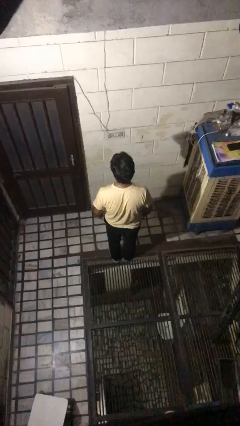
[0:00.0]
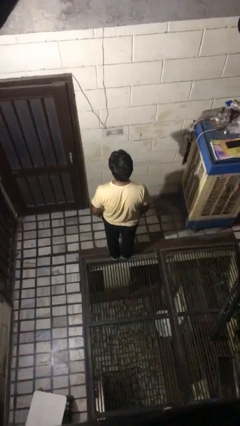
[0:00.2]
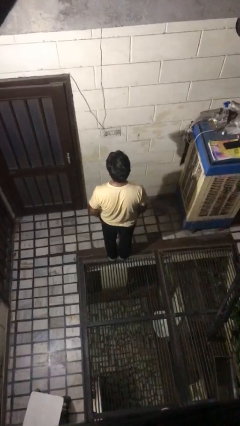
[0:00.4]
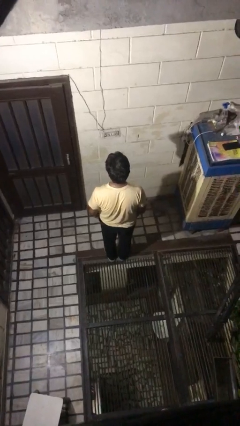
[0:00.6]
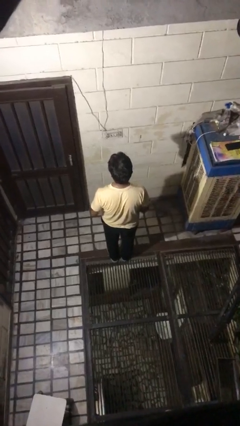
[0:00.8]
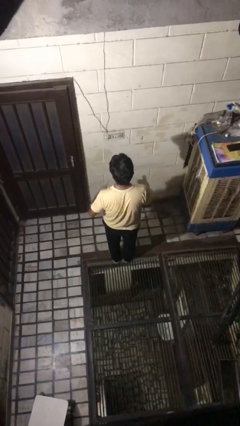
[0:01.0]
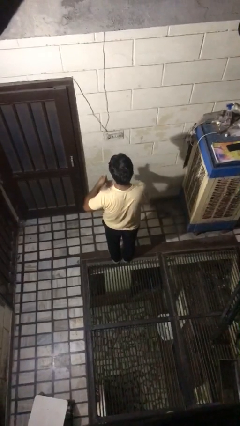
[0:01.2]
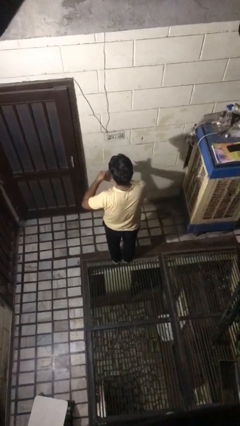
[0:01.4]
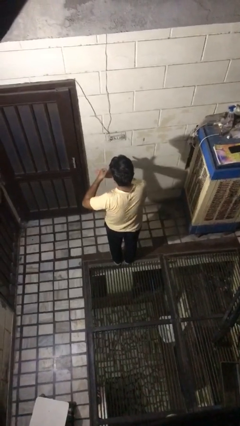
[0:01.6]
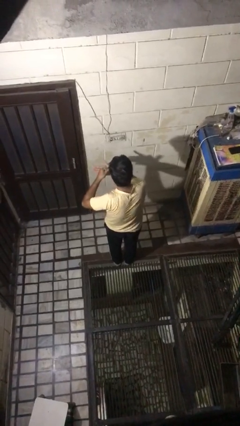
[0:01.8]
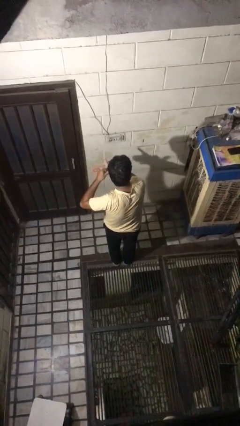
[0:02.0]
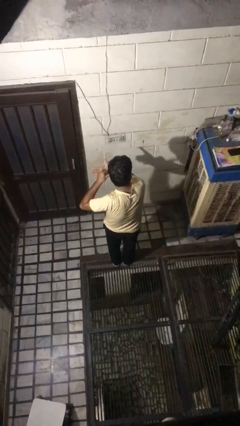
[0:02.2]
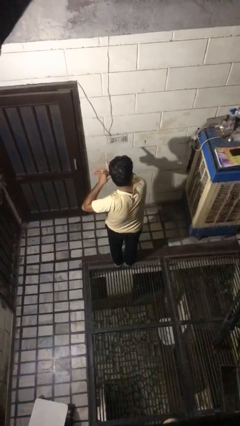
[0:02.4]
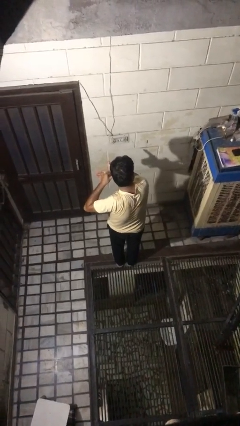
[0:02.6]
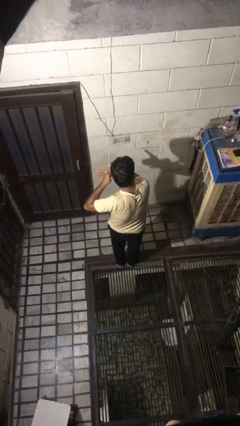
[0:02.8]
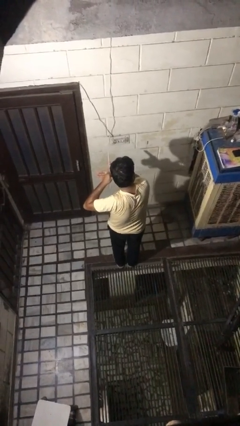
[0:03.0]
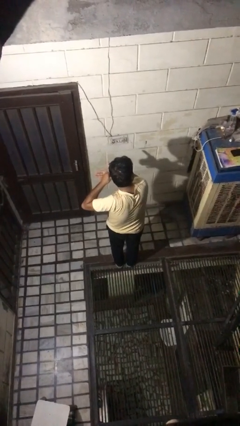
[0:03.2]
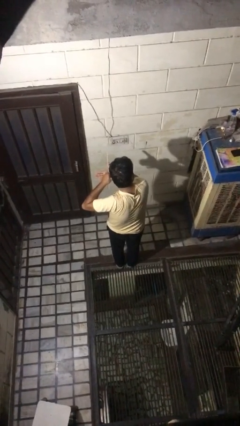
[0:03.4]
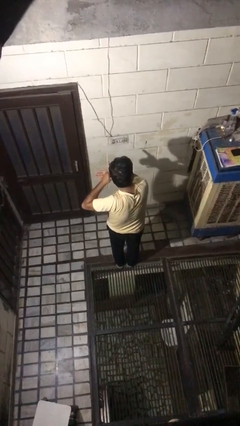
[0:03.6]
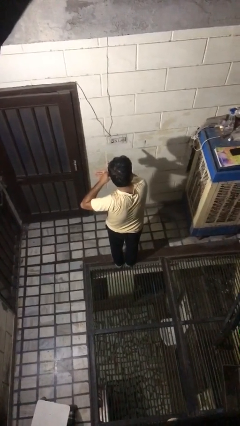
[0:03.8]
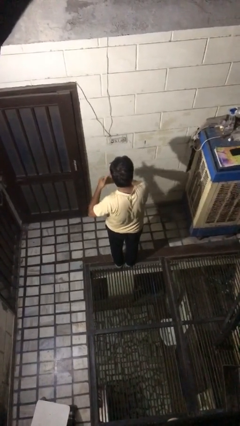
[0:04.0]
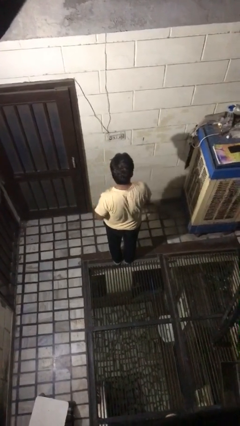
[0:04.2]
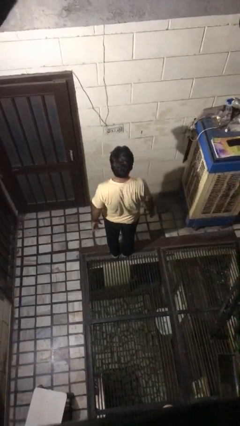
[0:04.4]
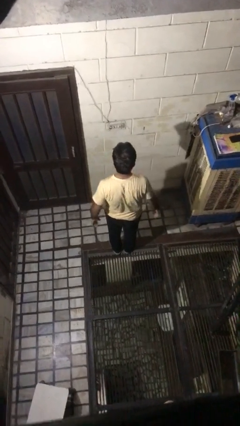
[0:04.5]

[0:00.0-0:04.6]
person gestures call me

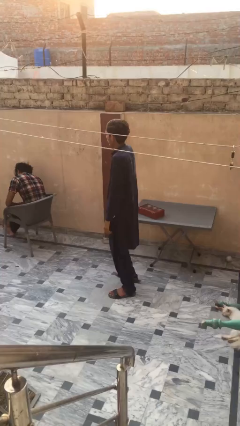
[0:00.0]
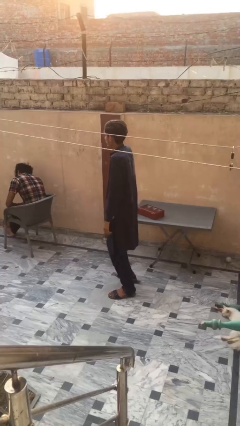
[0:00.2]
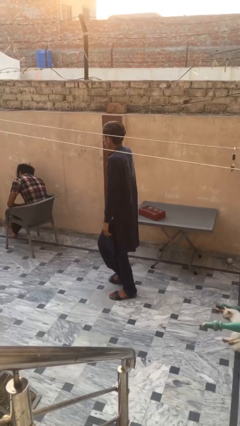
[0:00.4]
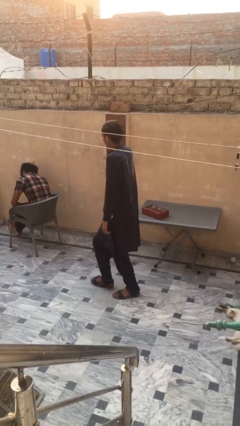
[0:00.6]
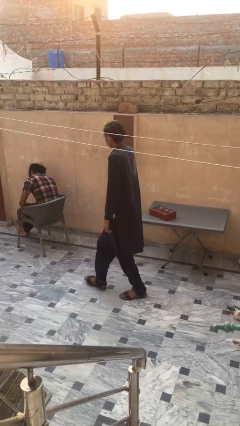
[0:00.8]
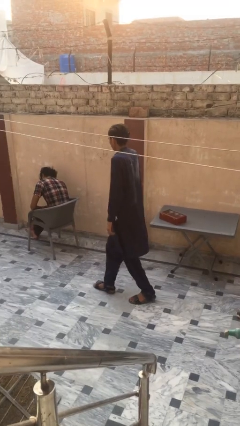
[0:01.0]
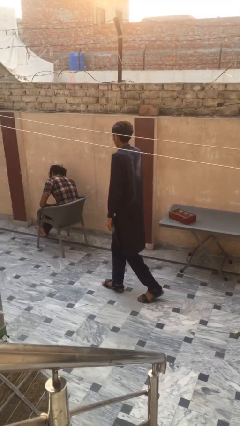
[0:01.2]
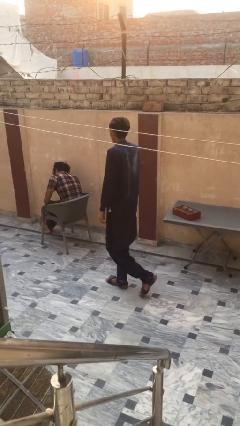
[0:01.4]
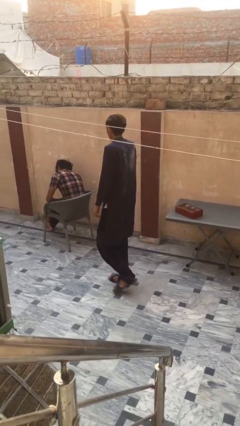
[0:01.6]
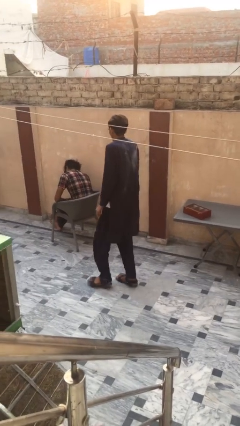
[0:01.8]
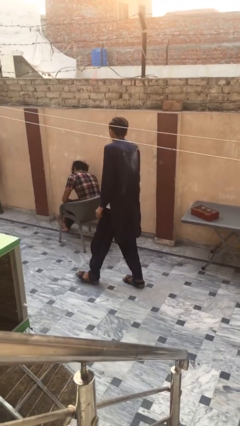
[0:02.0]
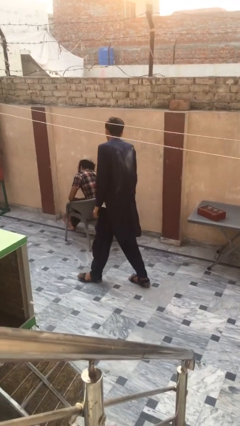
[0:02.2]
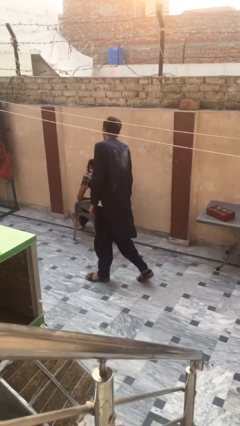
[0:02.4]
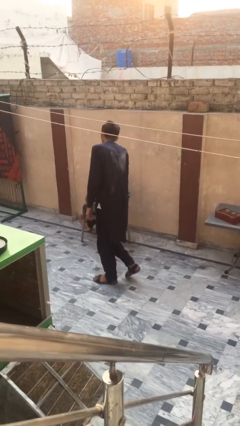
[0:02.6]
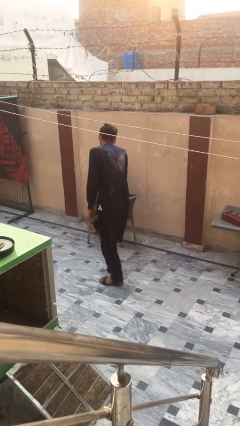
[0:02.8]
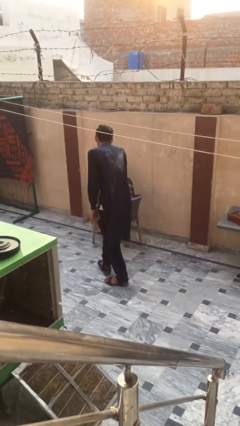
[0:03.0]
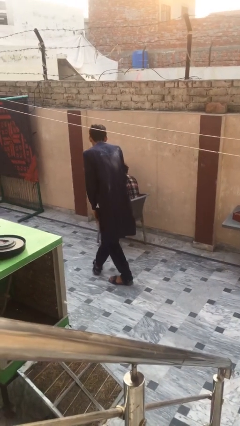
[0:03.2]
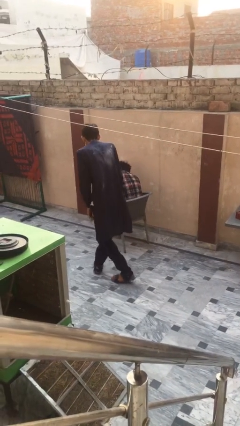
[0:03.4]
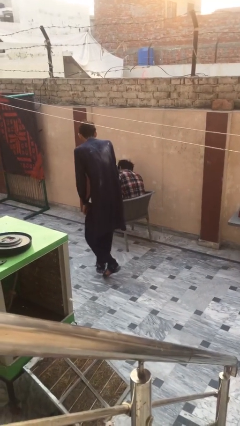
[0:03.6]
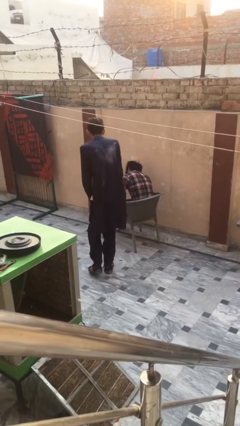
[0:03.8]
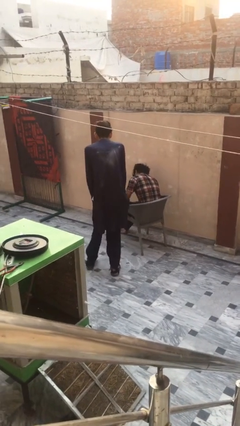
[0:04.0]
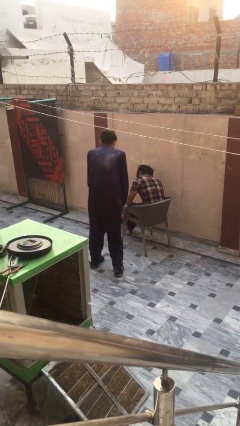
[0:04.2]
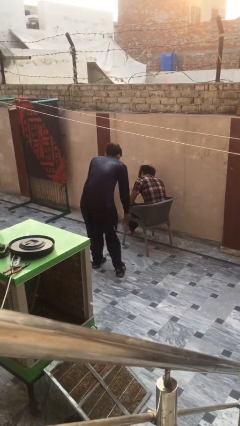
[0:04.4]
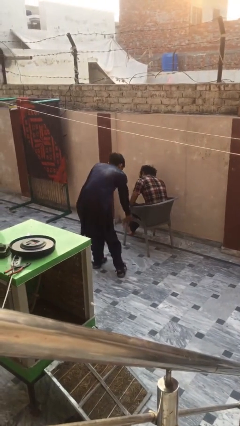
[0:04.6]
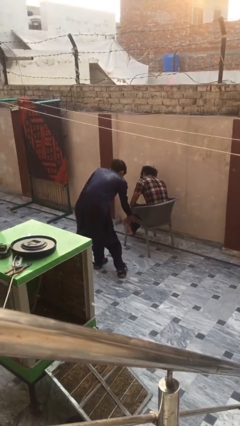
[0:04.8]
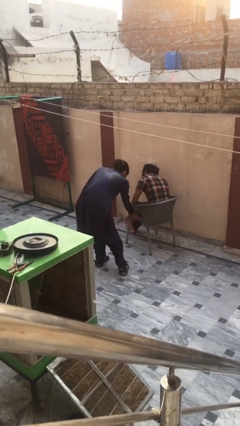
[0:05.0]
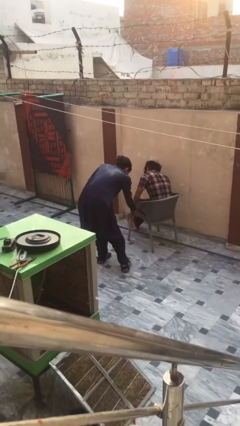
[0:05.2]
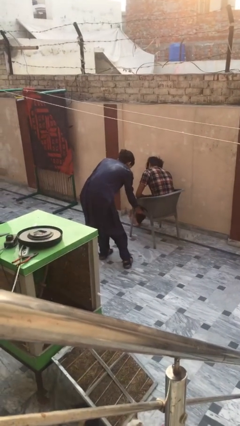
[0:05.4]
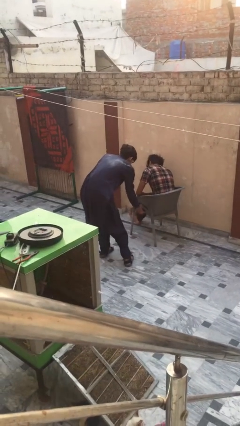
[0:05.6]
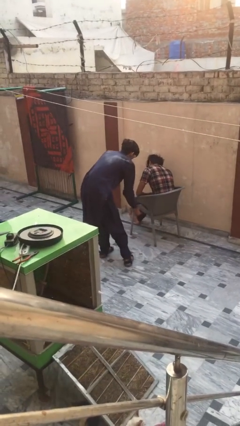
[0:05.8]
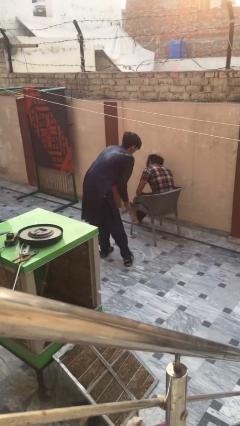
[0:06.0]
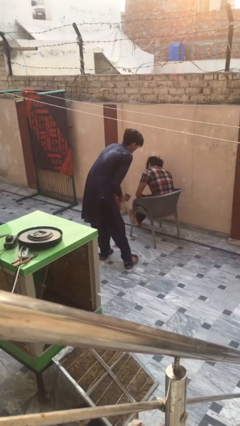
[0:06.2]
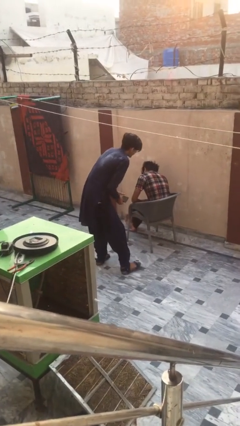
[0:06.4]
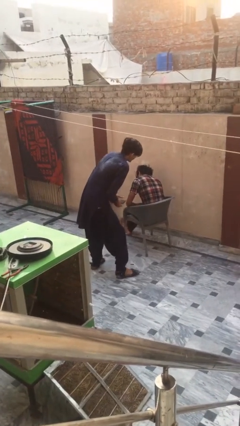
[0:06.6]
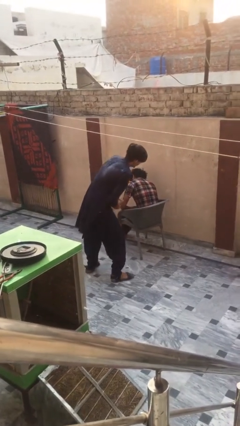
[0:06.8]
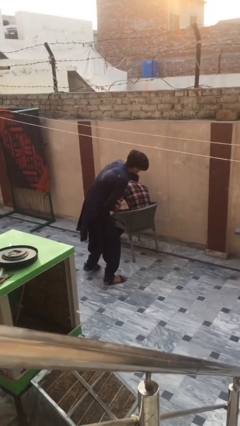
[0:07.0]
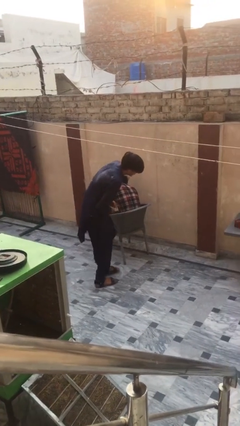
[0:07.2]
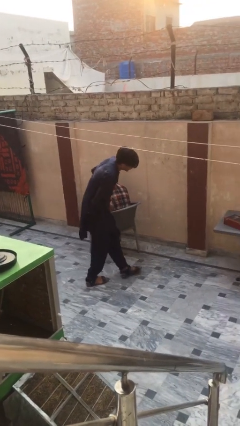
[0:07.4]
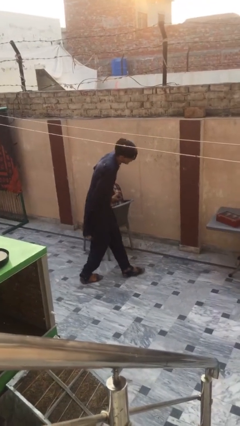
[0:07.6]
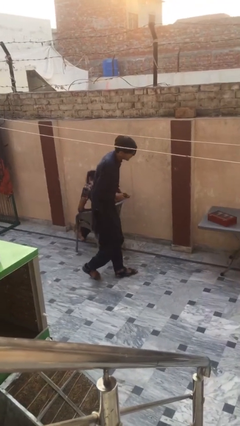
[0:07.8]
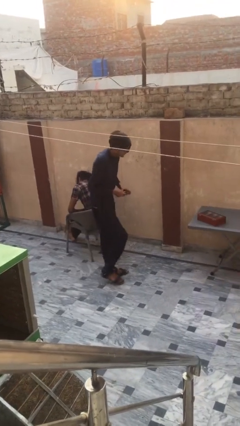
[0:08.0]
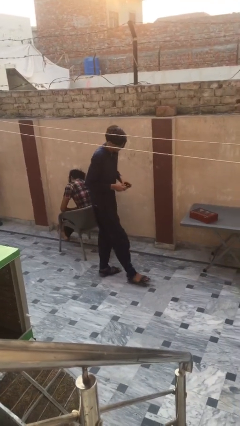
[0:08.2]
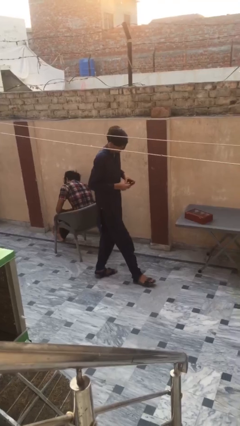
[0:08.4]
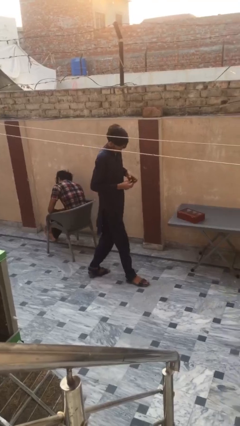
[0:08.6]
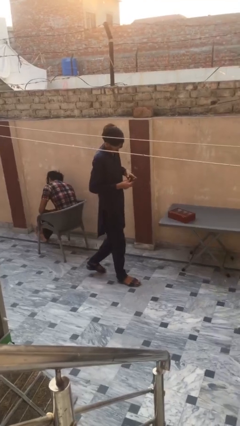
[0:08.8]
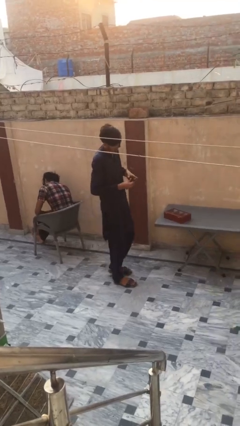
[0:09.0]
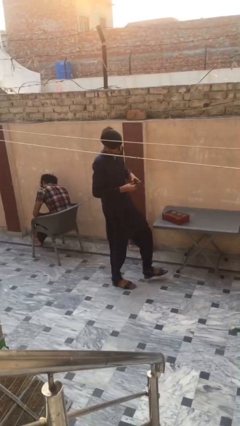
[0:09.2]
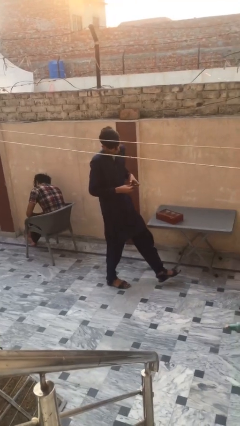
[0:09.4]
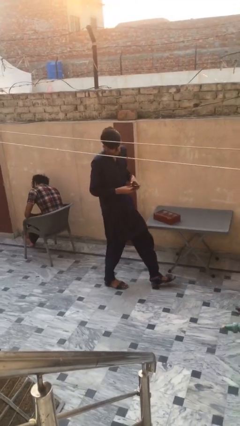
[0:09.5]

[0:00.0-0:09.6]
person steals object from person

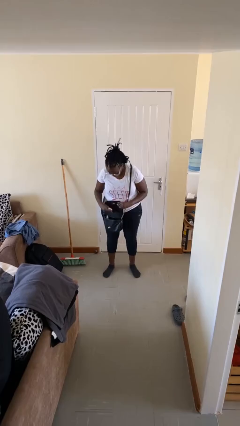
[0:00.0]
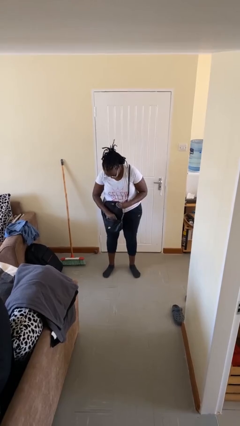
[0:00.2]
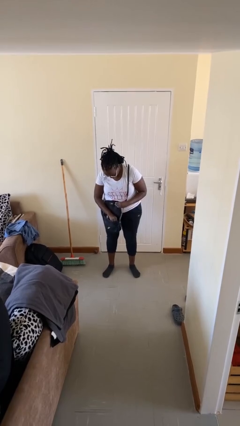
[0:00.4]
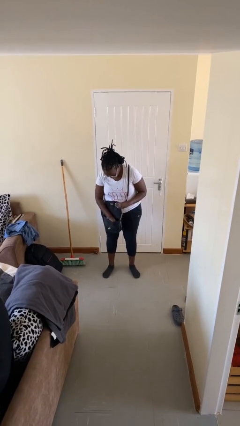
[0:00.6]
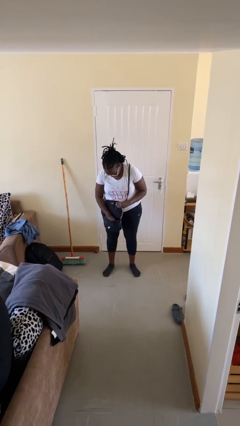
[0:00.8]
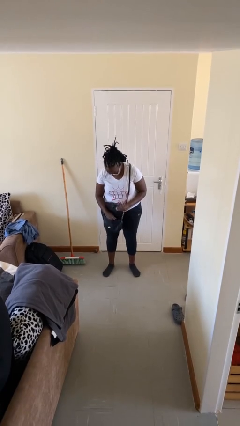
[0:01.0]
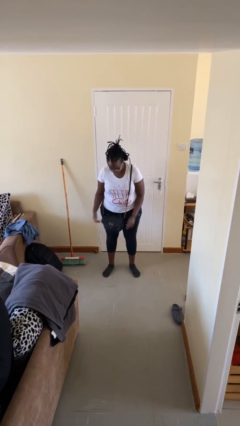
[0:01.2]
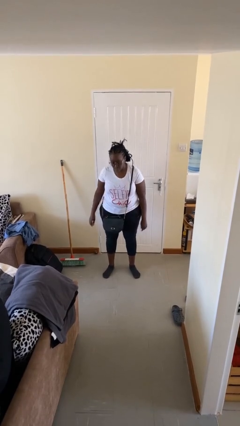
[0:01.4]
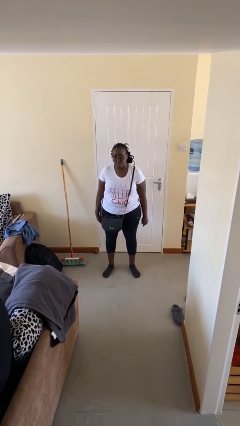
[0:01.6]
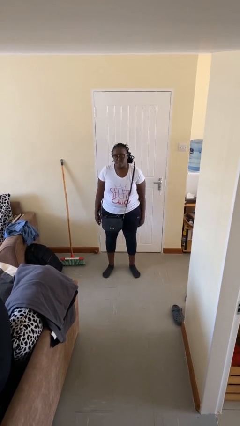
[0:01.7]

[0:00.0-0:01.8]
person puts object into purse

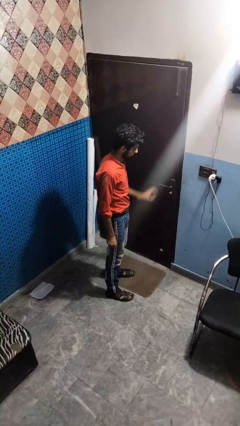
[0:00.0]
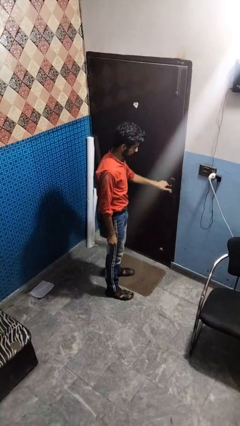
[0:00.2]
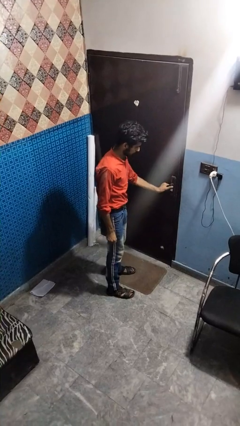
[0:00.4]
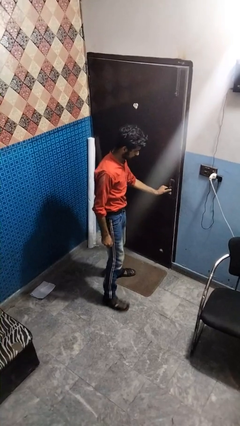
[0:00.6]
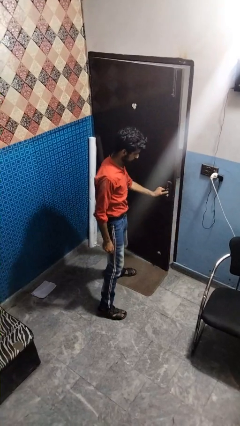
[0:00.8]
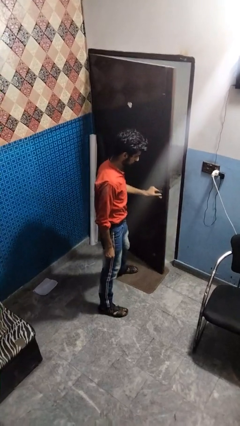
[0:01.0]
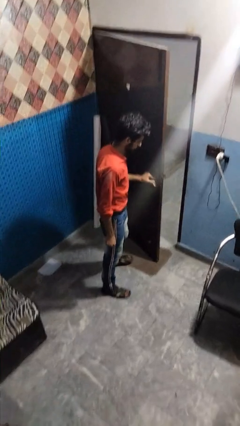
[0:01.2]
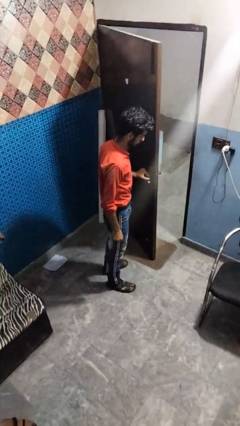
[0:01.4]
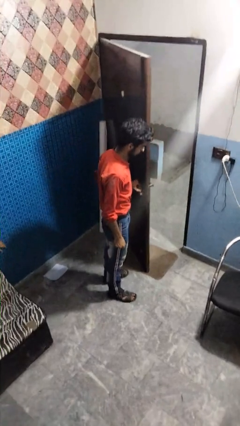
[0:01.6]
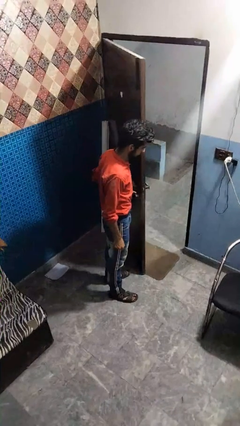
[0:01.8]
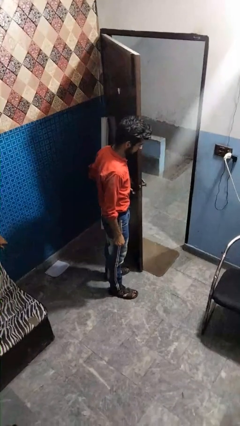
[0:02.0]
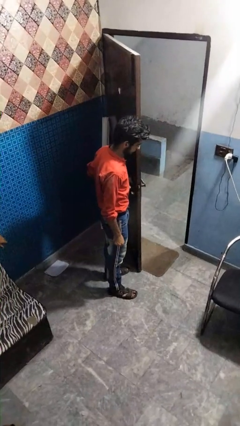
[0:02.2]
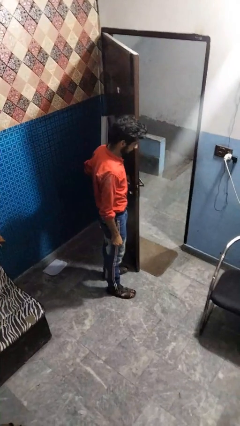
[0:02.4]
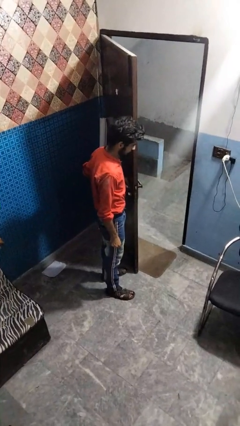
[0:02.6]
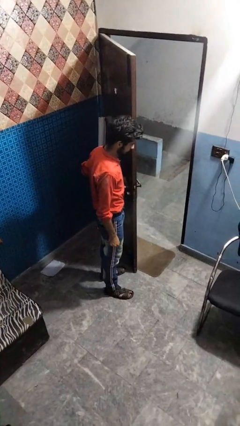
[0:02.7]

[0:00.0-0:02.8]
person opens facility door
